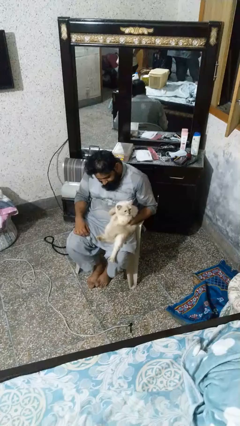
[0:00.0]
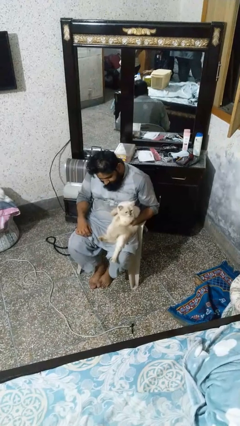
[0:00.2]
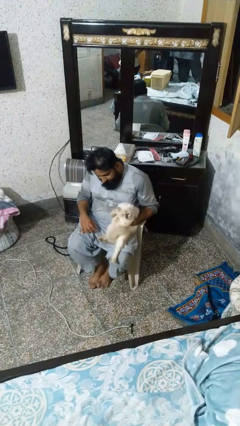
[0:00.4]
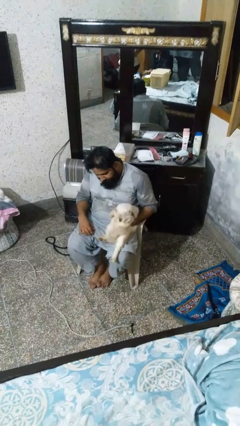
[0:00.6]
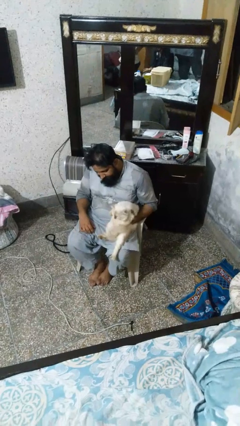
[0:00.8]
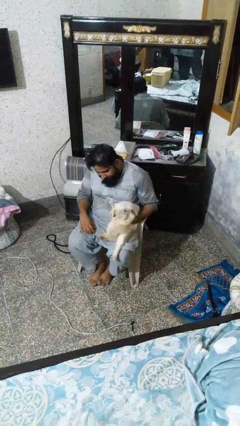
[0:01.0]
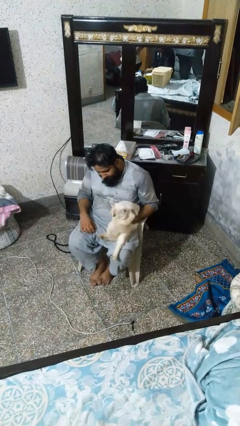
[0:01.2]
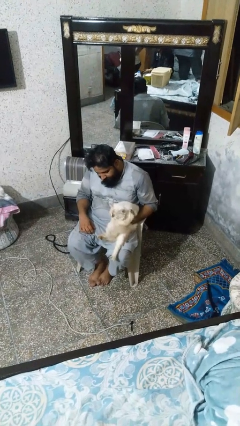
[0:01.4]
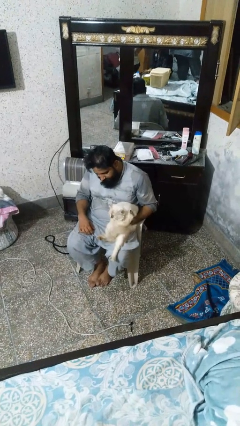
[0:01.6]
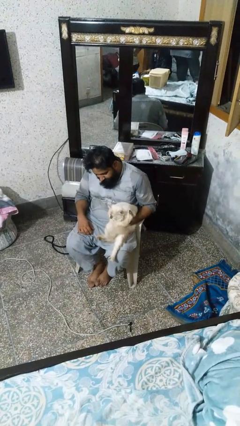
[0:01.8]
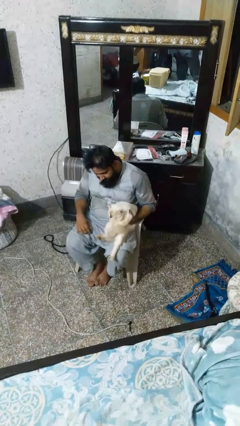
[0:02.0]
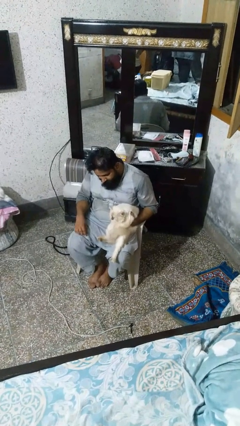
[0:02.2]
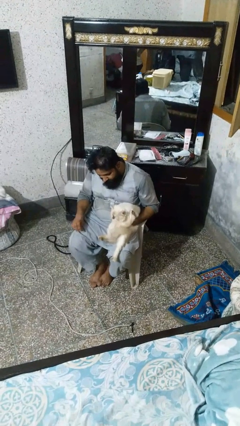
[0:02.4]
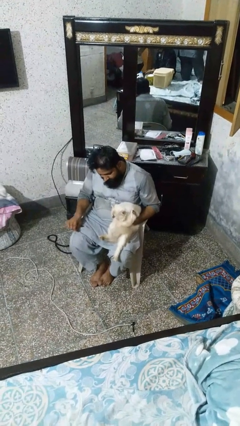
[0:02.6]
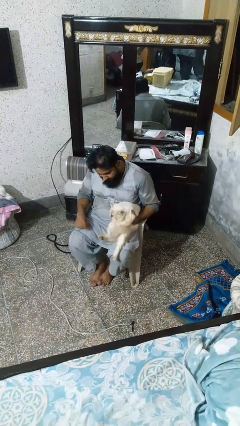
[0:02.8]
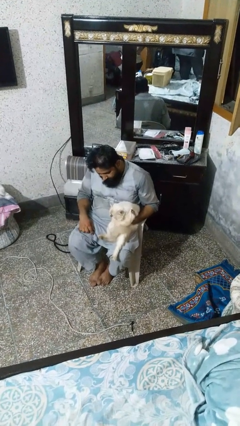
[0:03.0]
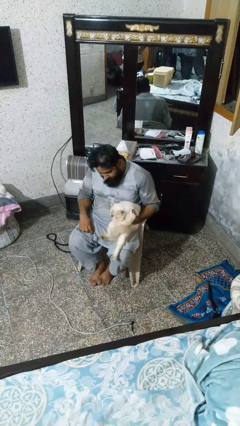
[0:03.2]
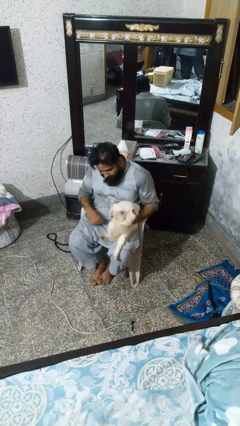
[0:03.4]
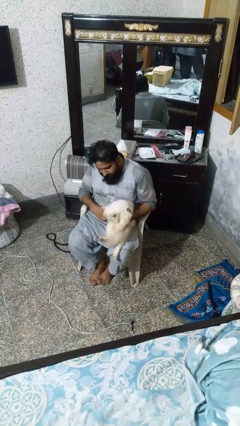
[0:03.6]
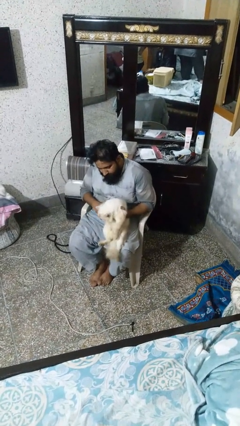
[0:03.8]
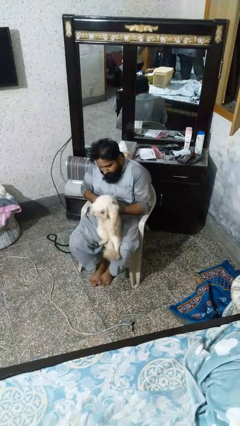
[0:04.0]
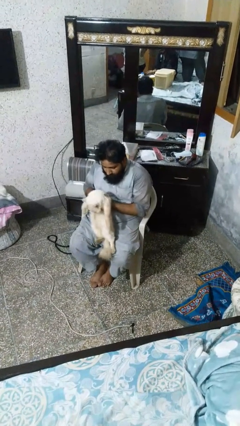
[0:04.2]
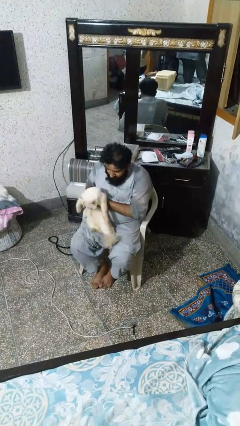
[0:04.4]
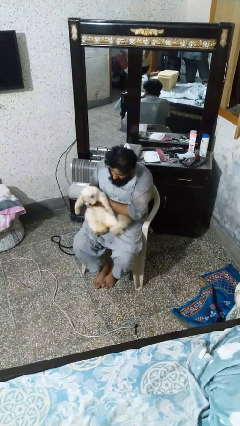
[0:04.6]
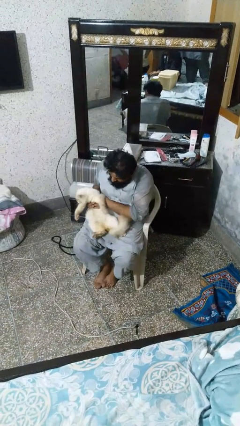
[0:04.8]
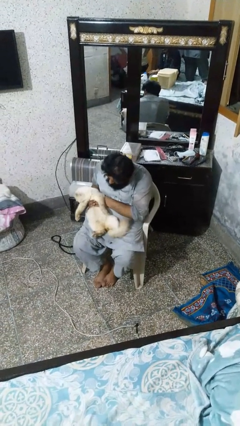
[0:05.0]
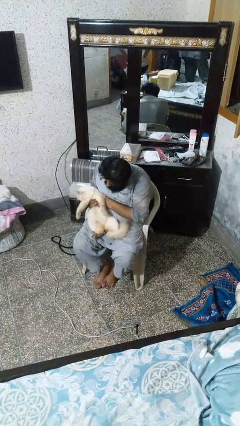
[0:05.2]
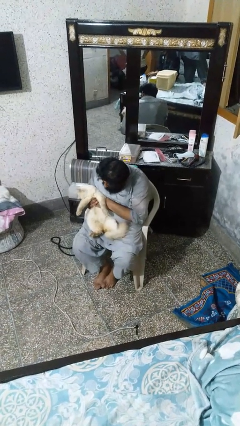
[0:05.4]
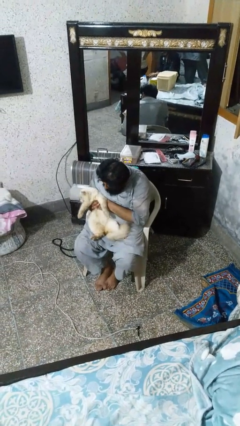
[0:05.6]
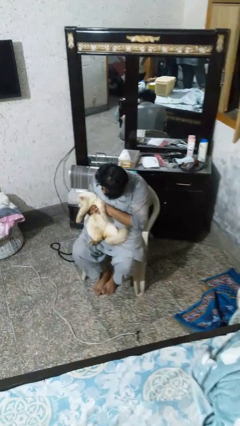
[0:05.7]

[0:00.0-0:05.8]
person pets cat

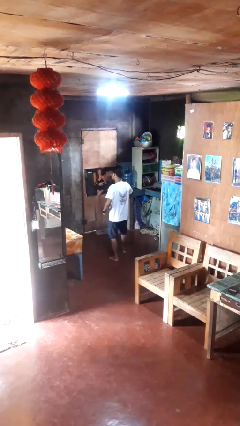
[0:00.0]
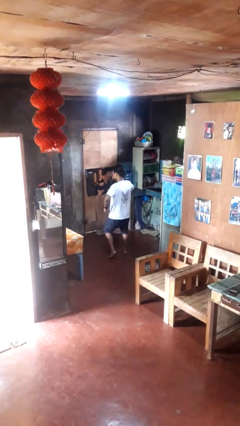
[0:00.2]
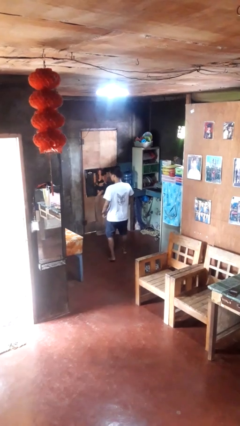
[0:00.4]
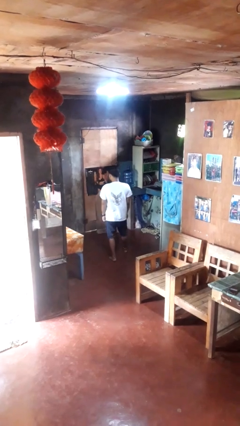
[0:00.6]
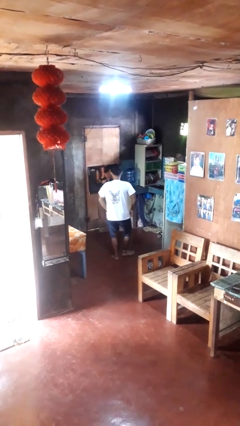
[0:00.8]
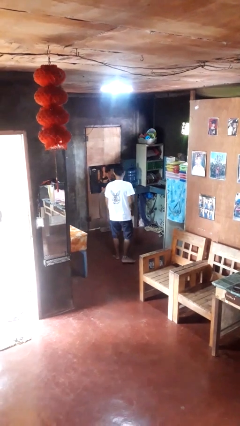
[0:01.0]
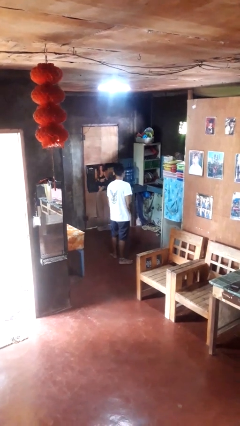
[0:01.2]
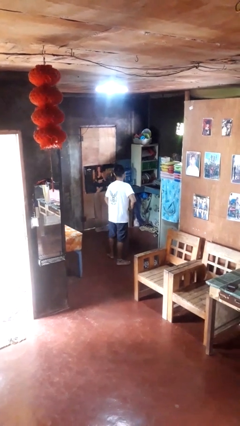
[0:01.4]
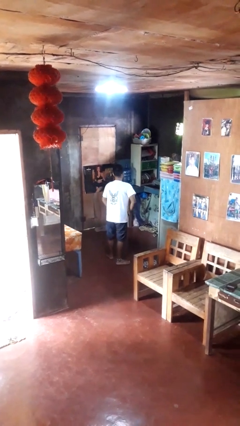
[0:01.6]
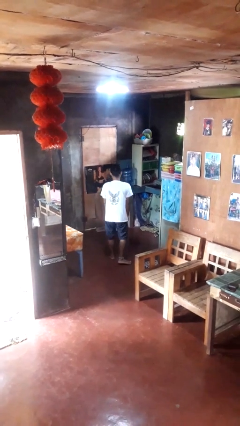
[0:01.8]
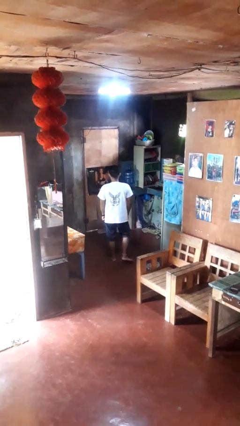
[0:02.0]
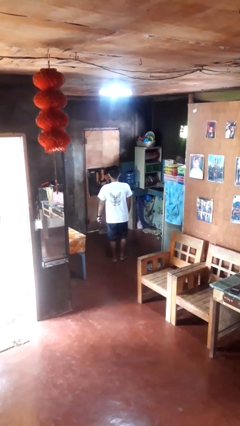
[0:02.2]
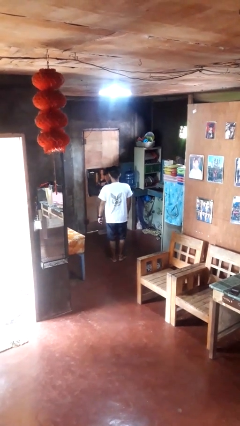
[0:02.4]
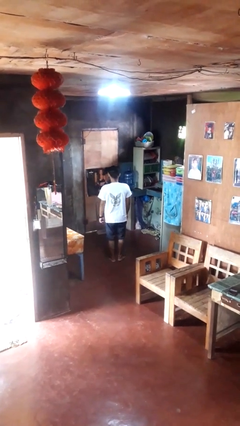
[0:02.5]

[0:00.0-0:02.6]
person dances in place

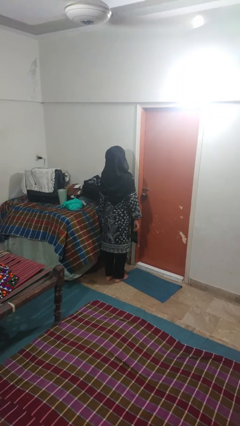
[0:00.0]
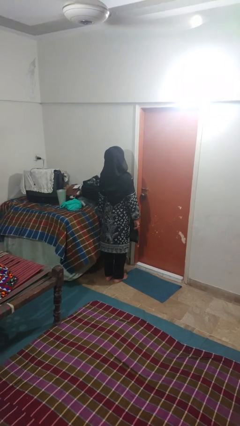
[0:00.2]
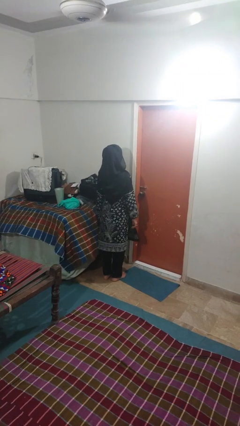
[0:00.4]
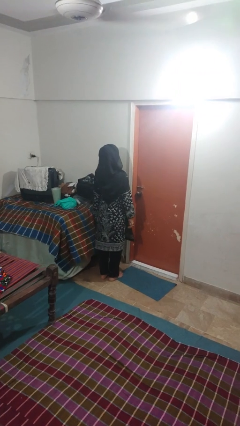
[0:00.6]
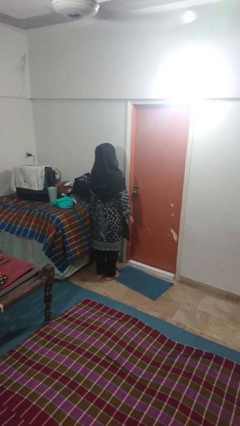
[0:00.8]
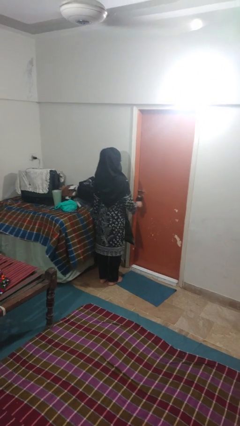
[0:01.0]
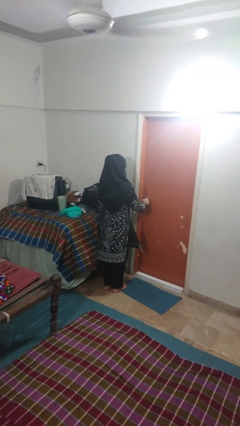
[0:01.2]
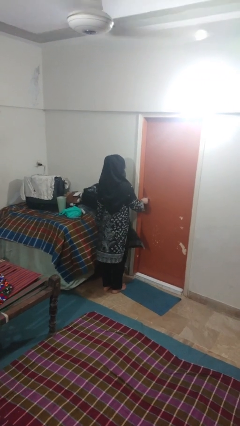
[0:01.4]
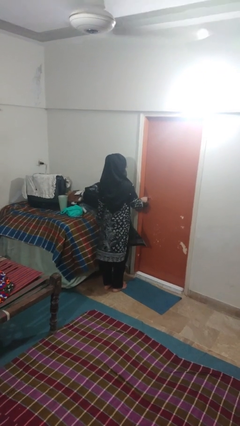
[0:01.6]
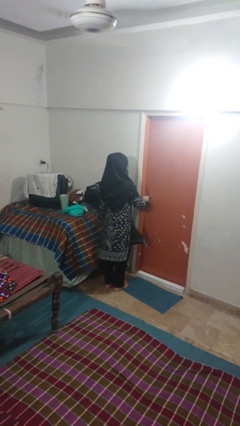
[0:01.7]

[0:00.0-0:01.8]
person locks door with keys

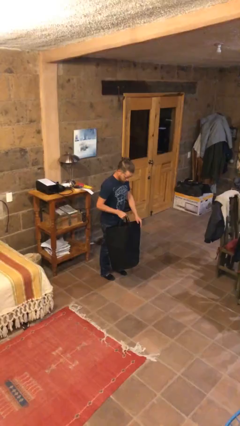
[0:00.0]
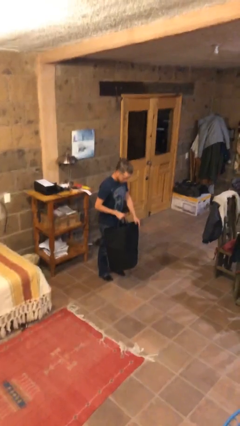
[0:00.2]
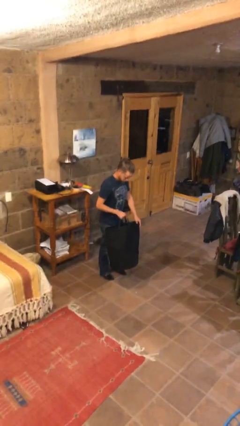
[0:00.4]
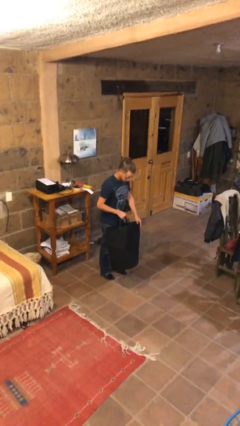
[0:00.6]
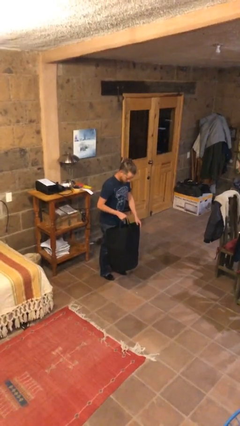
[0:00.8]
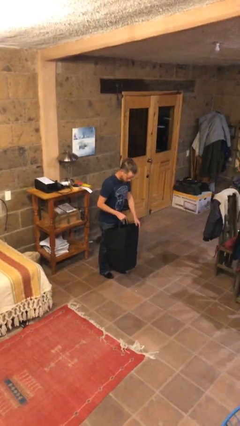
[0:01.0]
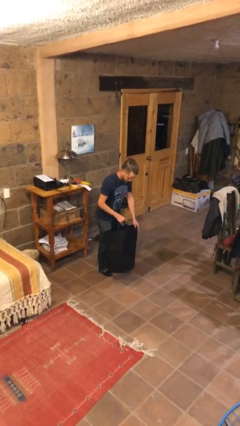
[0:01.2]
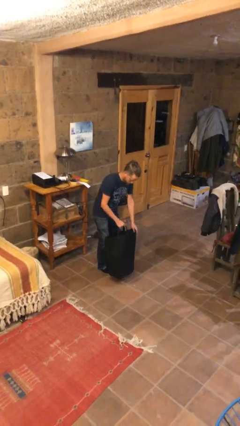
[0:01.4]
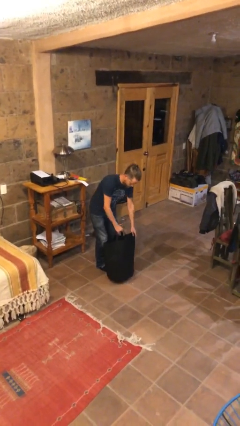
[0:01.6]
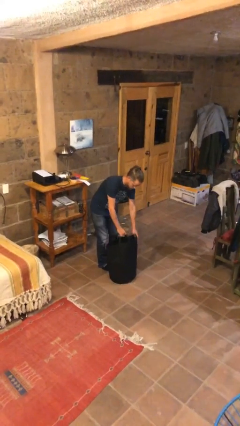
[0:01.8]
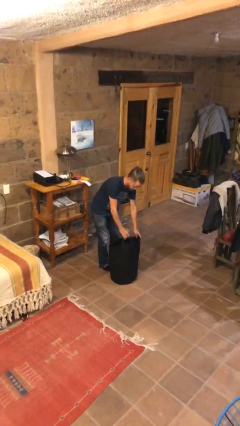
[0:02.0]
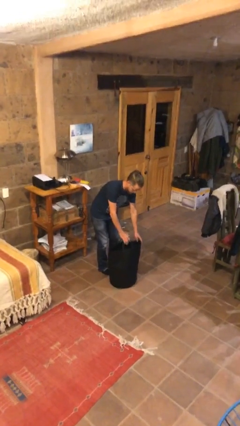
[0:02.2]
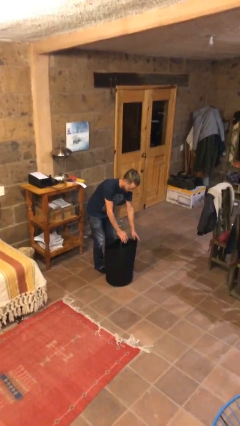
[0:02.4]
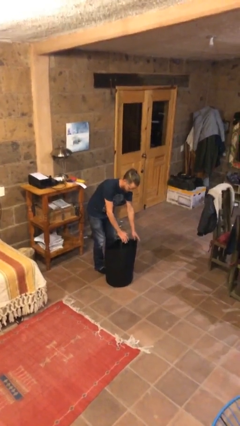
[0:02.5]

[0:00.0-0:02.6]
person puts down object on floor

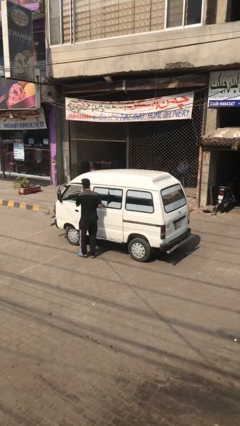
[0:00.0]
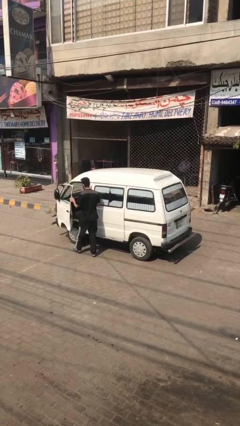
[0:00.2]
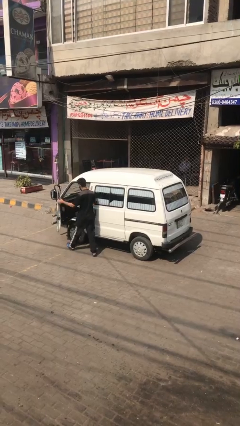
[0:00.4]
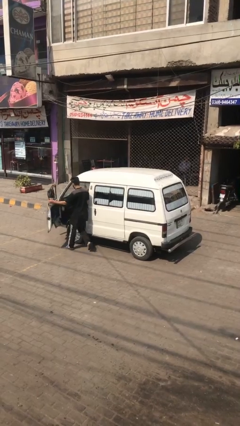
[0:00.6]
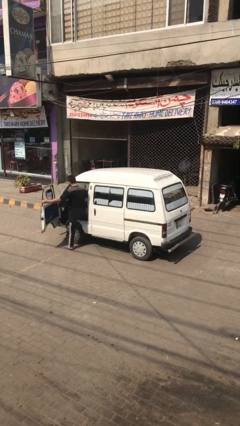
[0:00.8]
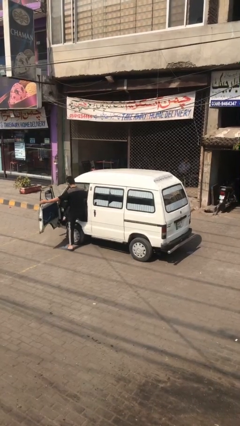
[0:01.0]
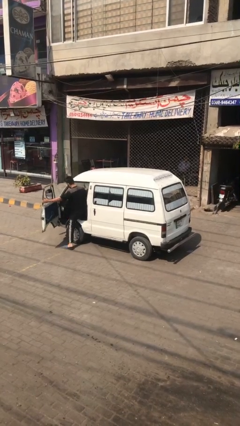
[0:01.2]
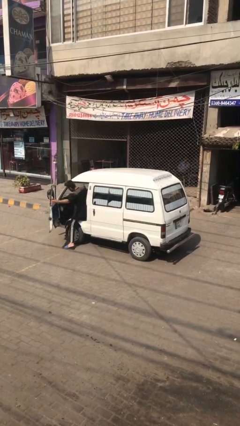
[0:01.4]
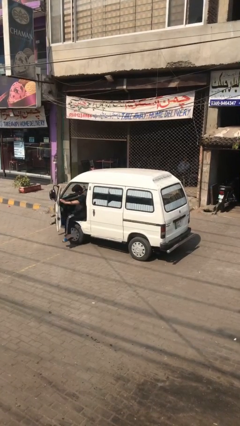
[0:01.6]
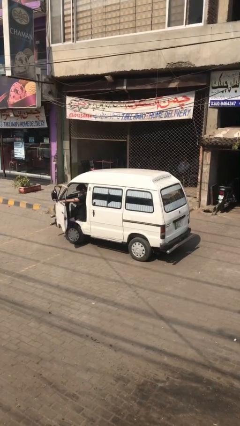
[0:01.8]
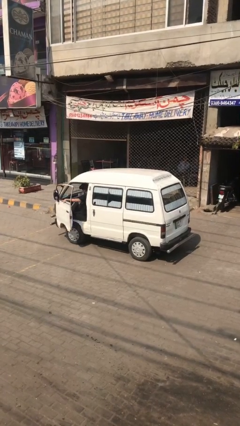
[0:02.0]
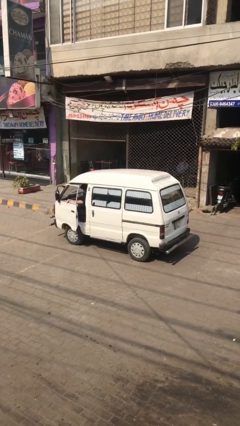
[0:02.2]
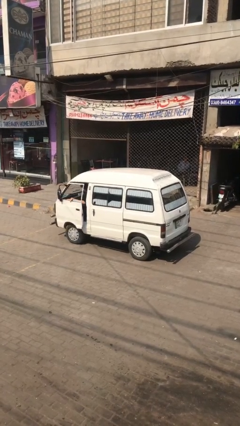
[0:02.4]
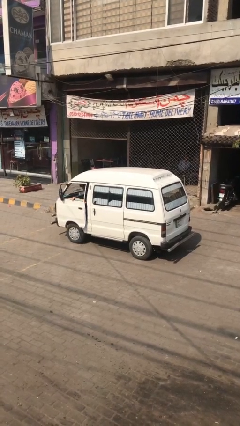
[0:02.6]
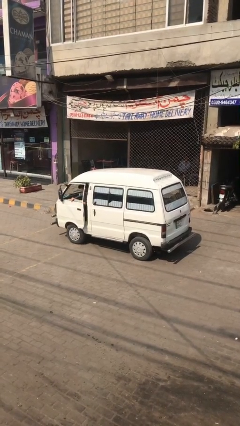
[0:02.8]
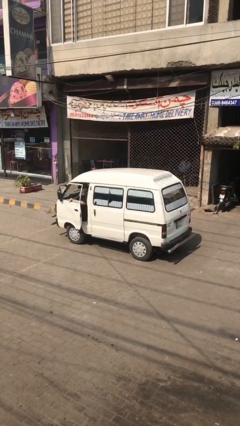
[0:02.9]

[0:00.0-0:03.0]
car picks up person

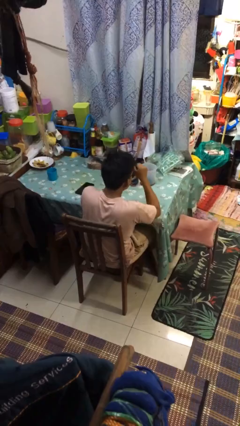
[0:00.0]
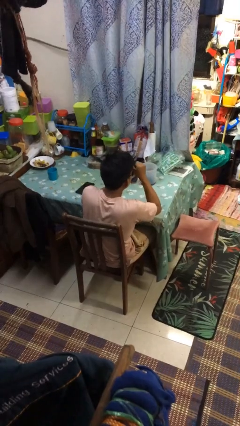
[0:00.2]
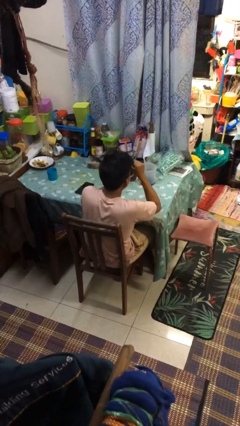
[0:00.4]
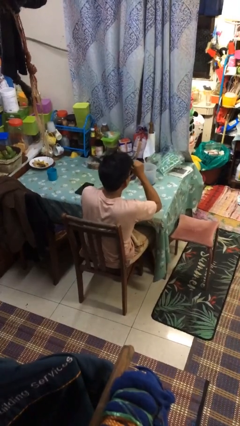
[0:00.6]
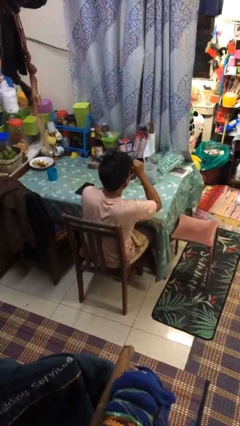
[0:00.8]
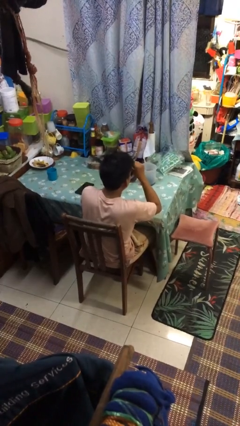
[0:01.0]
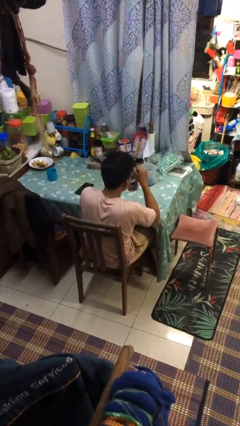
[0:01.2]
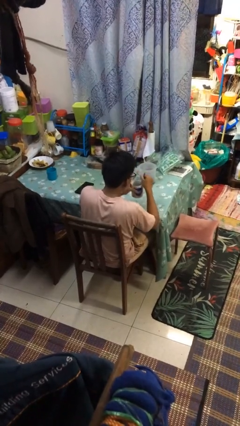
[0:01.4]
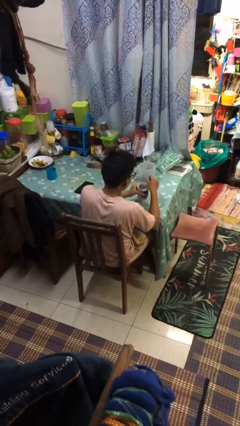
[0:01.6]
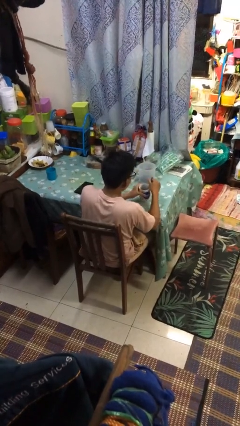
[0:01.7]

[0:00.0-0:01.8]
person drinks from mug
